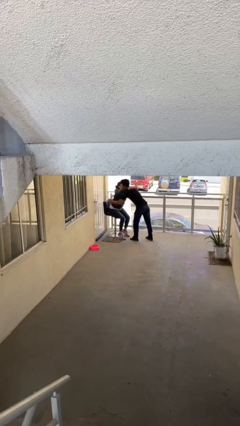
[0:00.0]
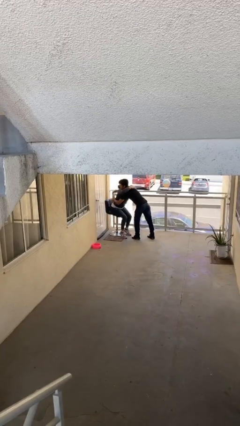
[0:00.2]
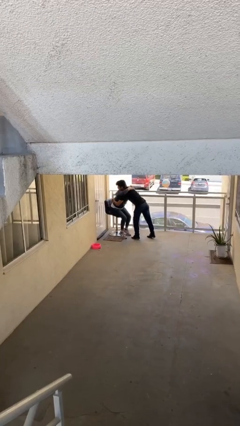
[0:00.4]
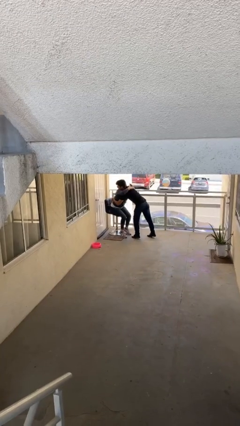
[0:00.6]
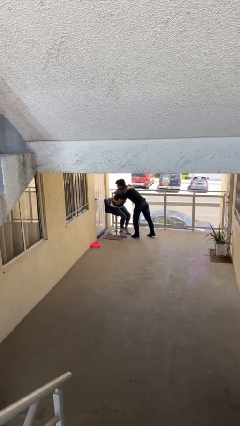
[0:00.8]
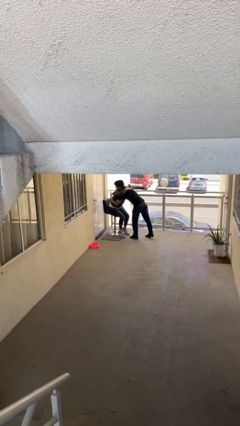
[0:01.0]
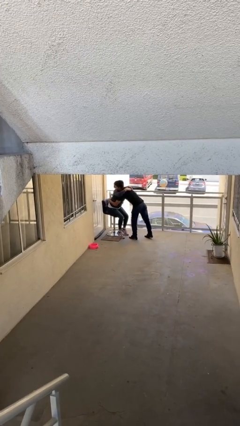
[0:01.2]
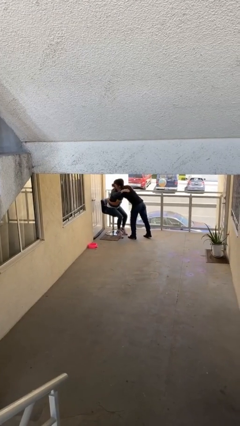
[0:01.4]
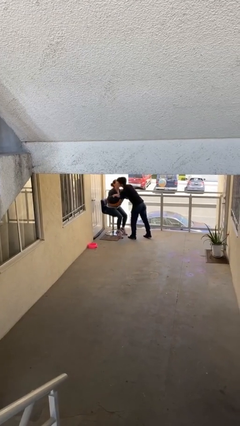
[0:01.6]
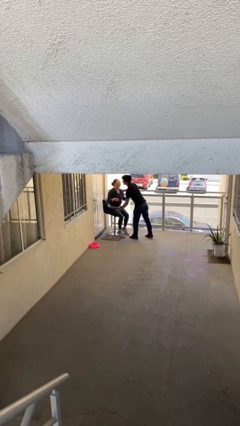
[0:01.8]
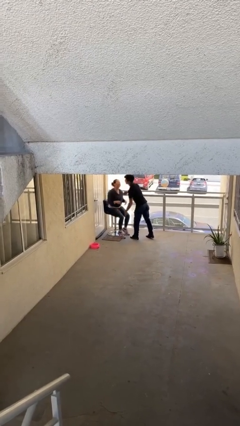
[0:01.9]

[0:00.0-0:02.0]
person embraces person

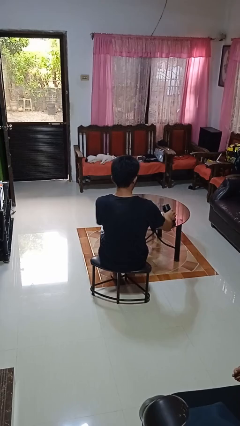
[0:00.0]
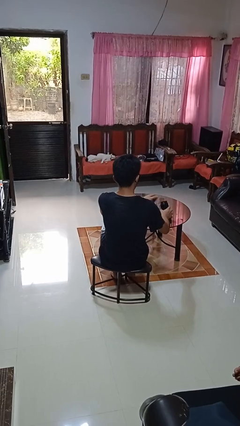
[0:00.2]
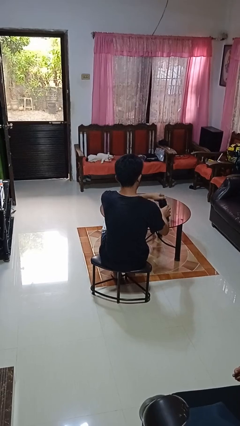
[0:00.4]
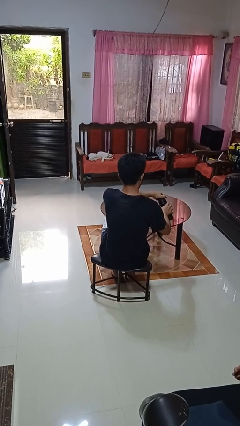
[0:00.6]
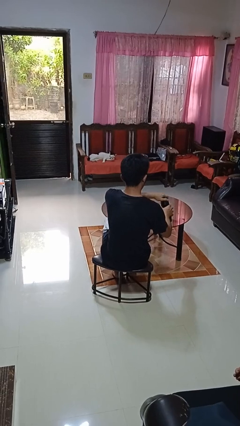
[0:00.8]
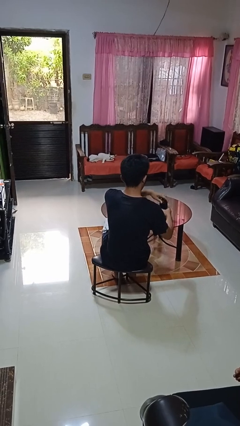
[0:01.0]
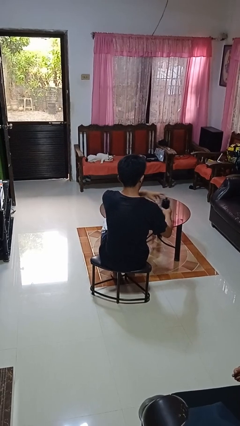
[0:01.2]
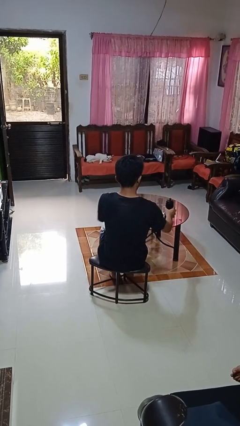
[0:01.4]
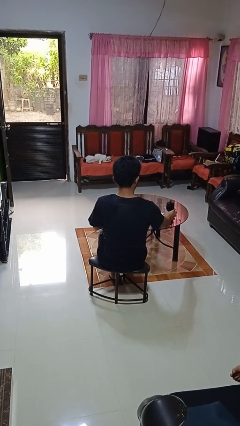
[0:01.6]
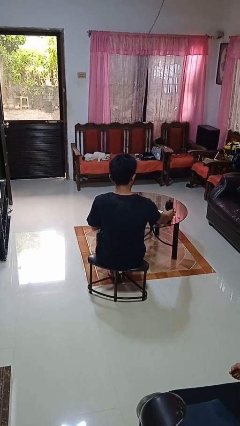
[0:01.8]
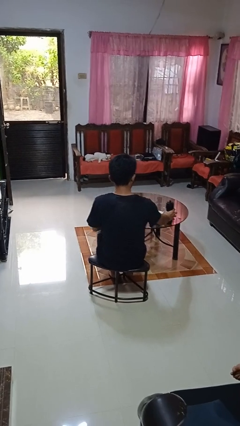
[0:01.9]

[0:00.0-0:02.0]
person screws lid to bottle

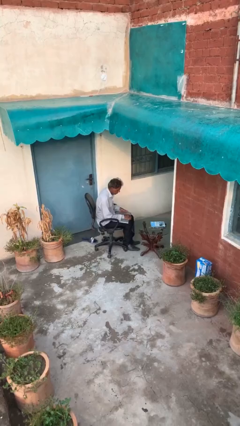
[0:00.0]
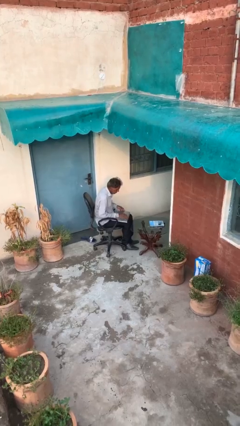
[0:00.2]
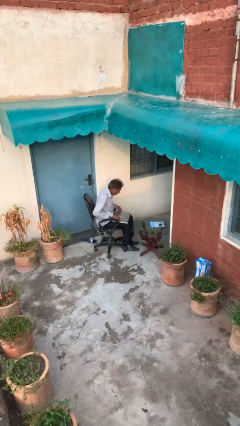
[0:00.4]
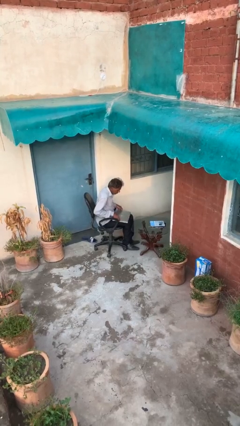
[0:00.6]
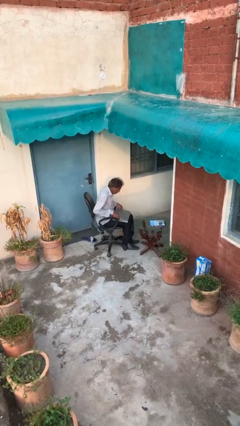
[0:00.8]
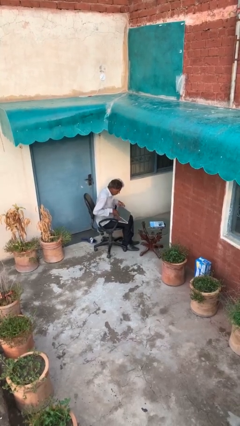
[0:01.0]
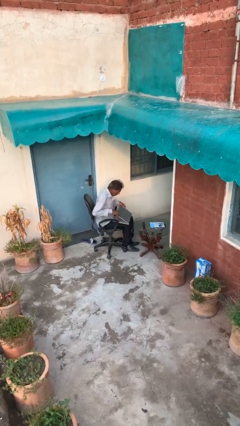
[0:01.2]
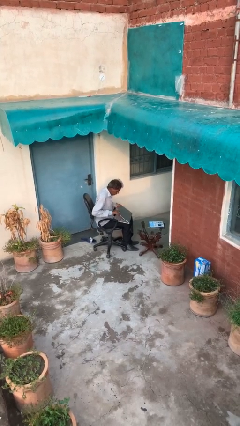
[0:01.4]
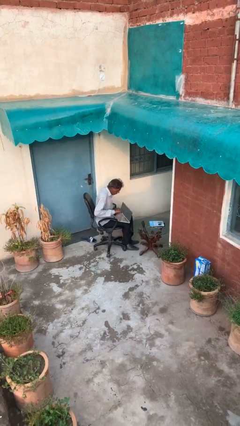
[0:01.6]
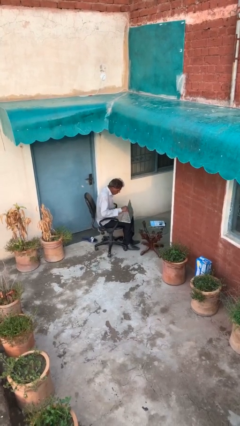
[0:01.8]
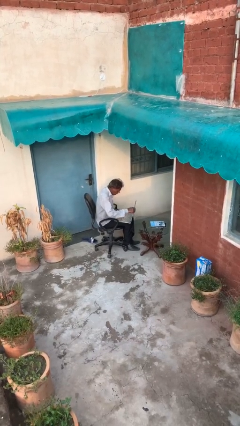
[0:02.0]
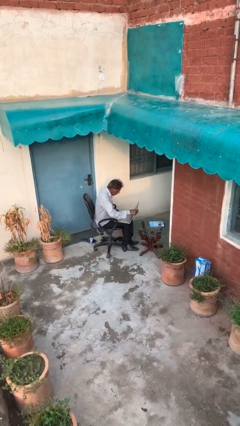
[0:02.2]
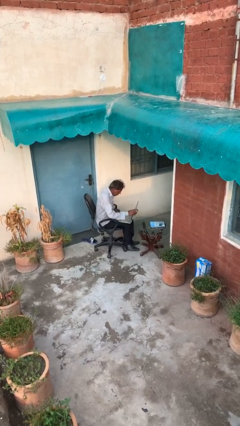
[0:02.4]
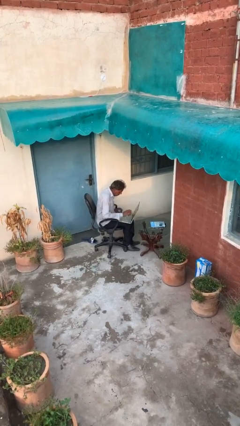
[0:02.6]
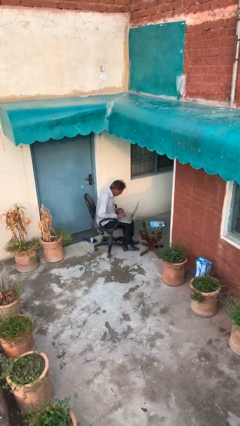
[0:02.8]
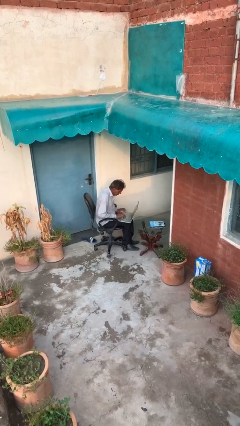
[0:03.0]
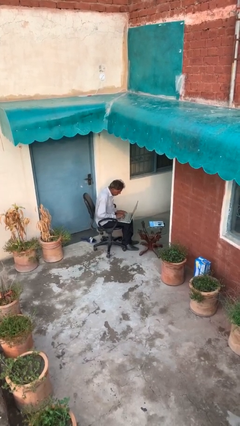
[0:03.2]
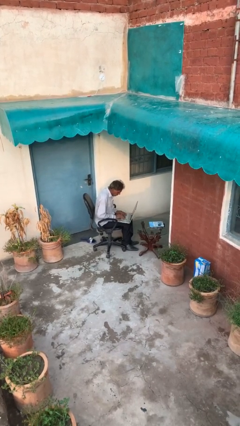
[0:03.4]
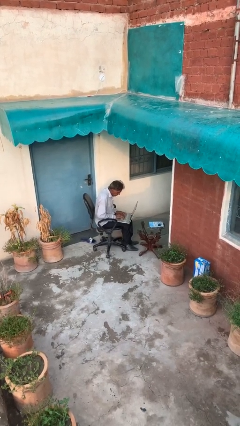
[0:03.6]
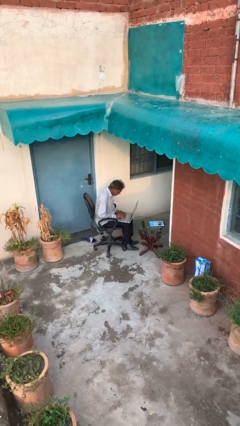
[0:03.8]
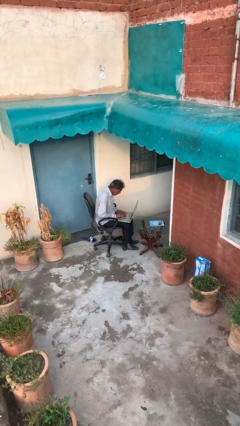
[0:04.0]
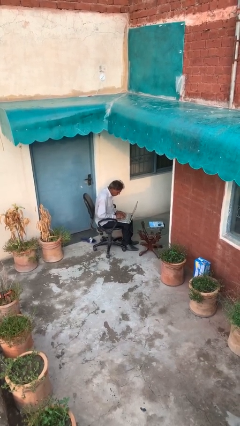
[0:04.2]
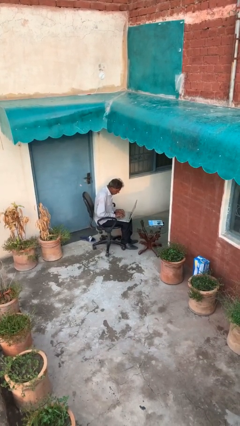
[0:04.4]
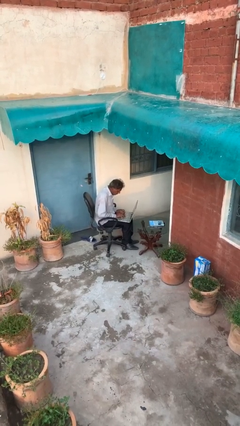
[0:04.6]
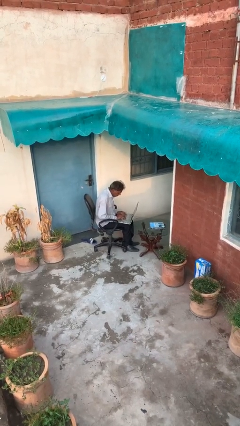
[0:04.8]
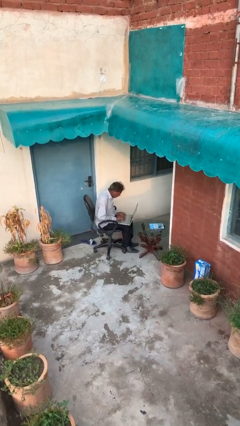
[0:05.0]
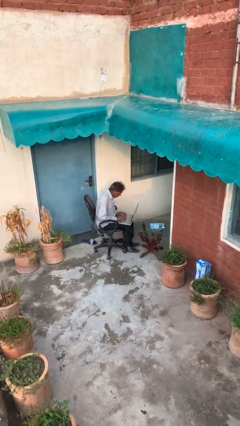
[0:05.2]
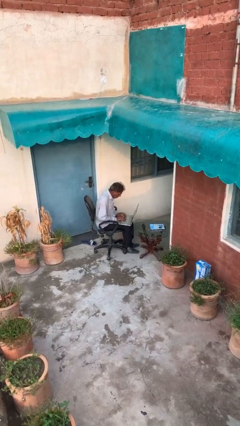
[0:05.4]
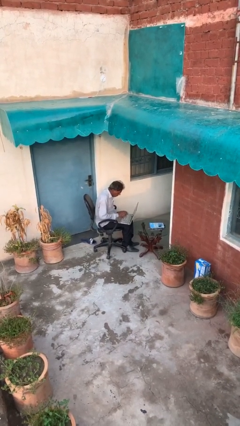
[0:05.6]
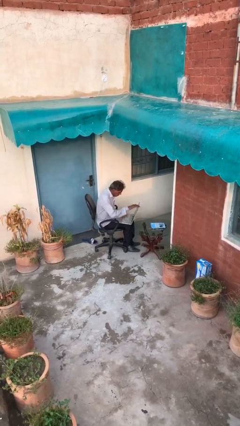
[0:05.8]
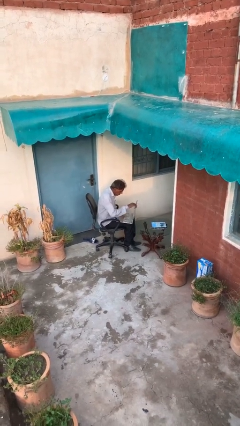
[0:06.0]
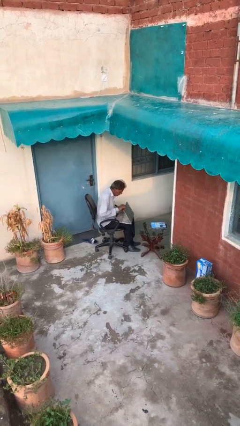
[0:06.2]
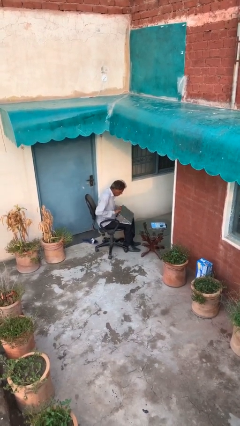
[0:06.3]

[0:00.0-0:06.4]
person interacts with laptop

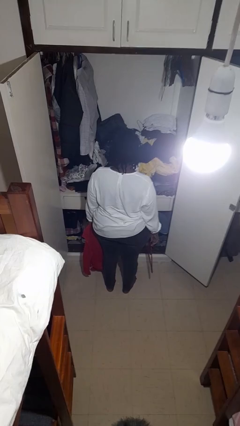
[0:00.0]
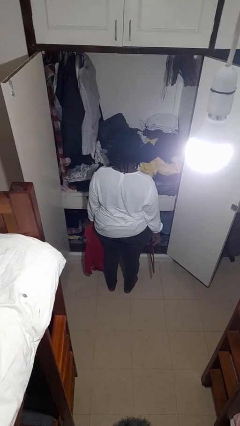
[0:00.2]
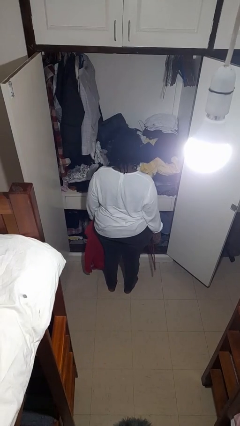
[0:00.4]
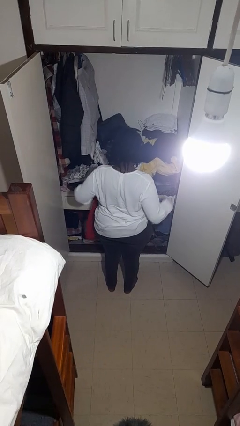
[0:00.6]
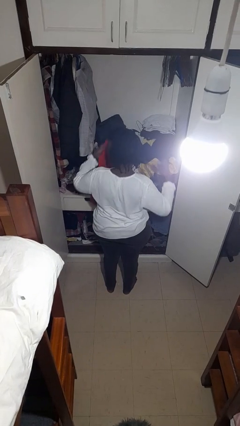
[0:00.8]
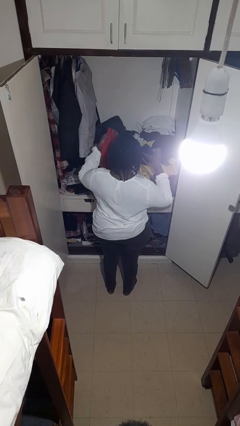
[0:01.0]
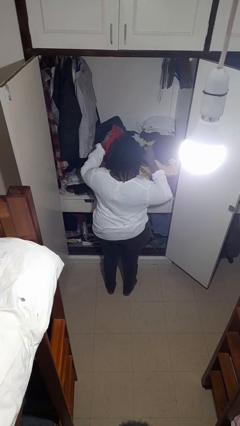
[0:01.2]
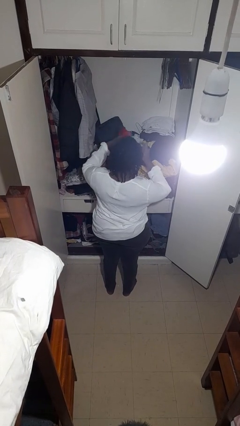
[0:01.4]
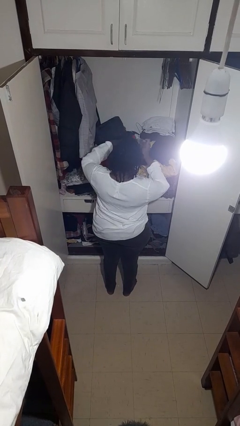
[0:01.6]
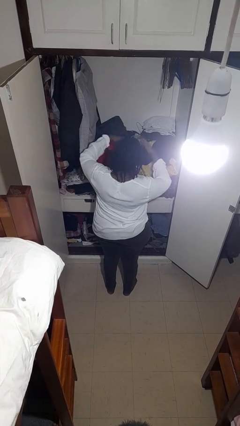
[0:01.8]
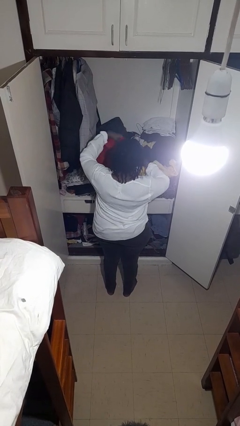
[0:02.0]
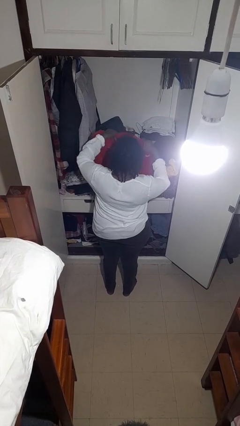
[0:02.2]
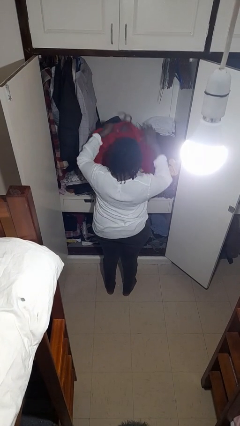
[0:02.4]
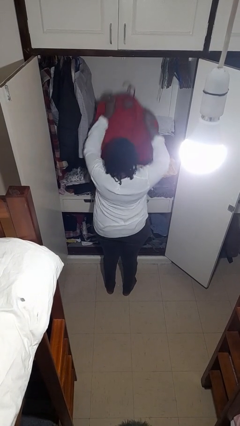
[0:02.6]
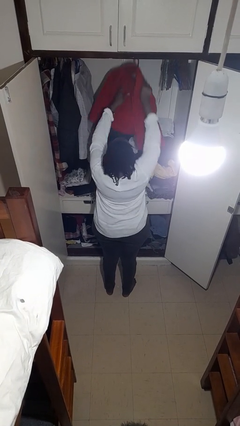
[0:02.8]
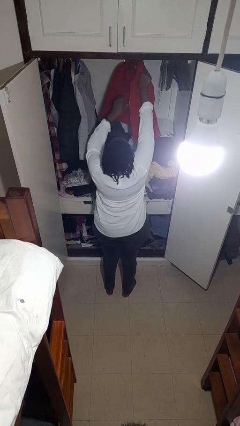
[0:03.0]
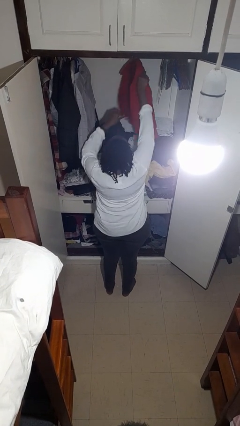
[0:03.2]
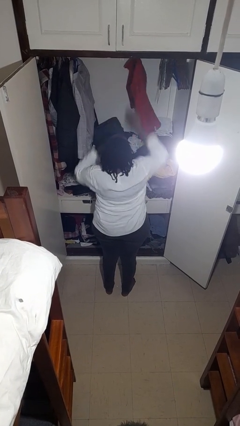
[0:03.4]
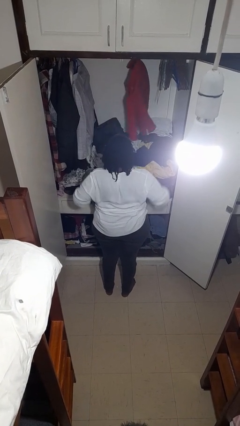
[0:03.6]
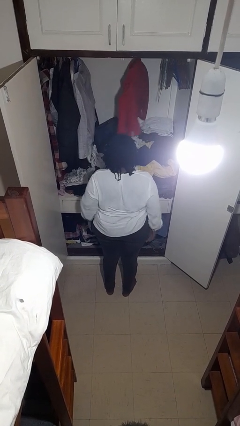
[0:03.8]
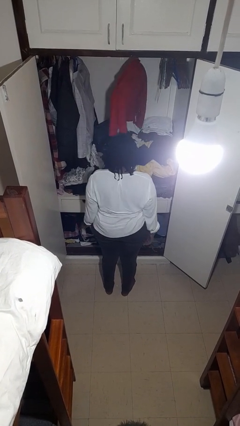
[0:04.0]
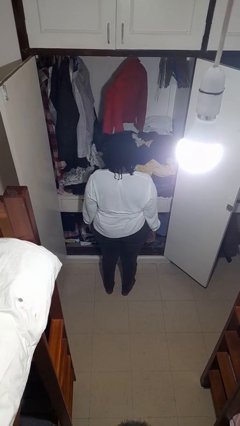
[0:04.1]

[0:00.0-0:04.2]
person puts clothes into closet

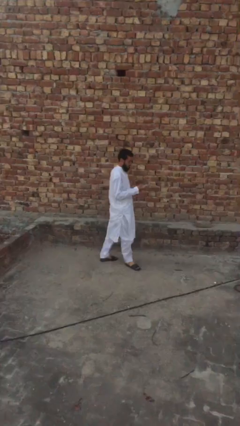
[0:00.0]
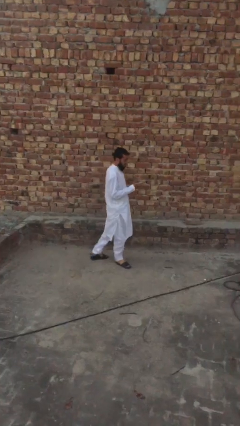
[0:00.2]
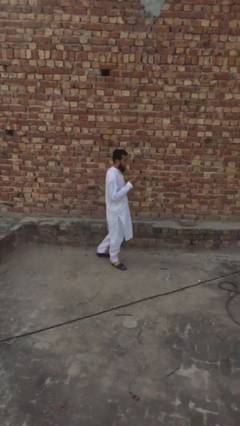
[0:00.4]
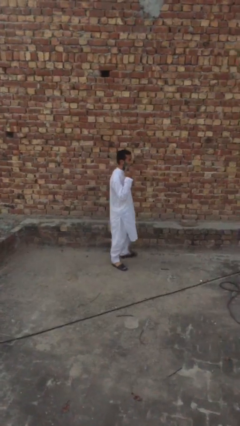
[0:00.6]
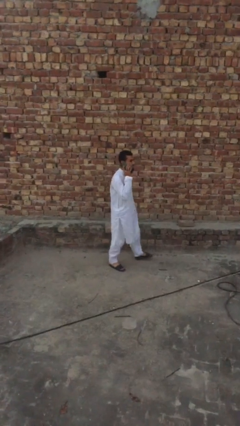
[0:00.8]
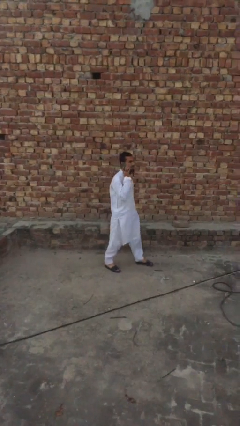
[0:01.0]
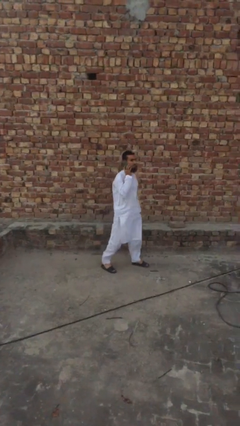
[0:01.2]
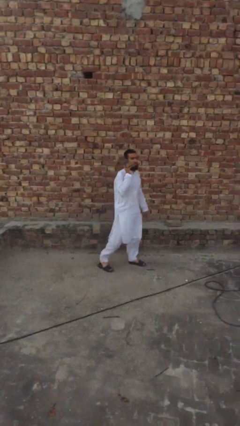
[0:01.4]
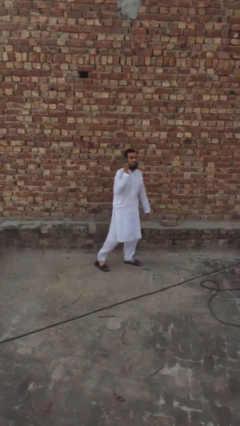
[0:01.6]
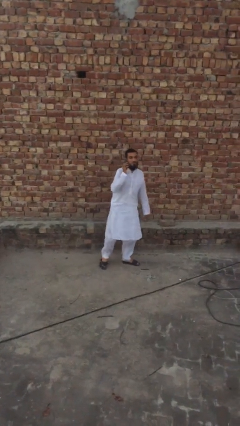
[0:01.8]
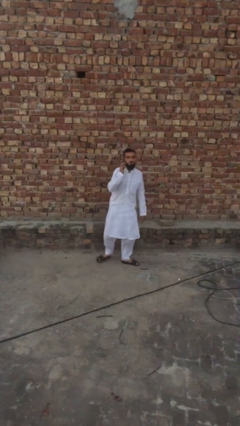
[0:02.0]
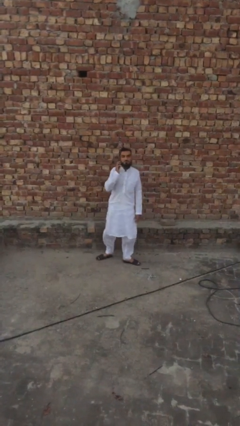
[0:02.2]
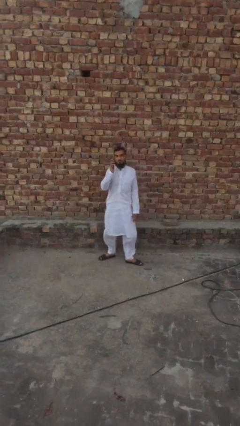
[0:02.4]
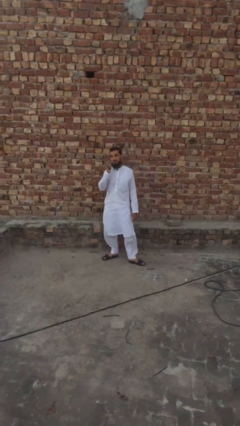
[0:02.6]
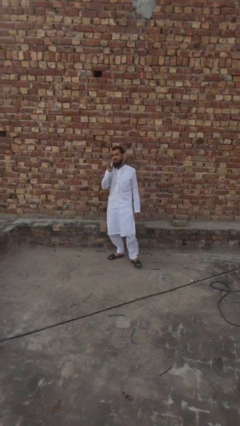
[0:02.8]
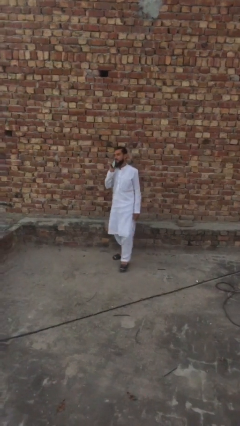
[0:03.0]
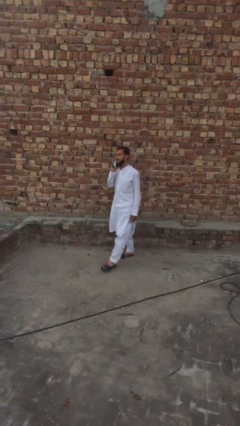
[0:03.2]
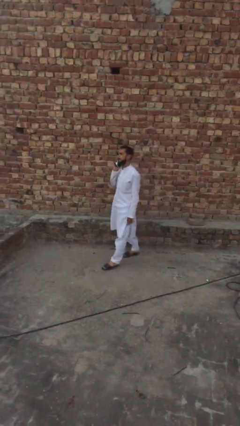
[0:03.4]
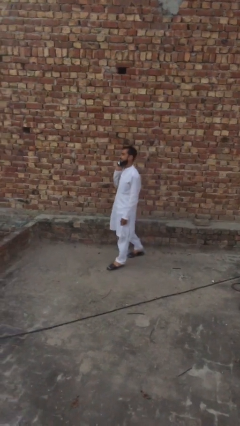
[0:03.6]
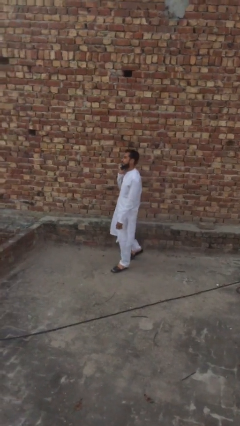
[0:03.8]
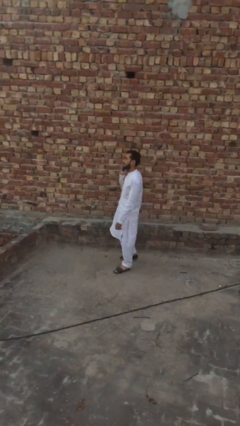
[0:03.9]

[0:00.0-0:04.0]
person talks on phone
